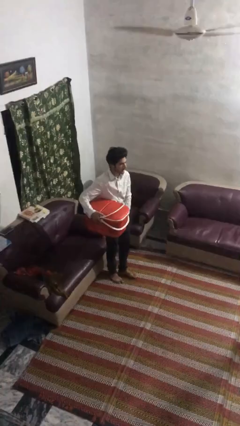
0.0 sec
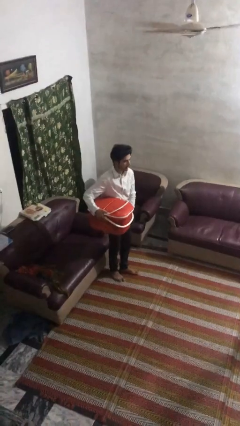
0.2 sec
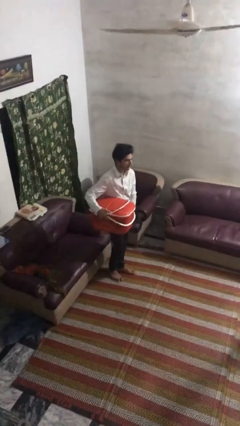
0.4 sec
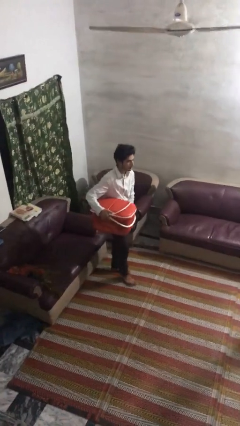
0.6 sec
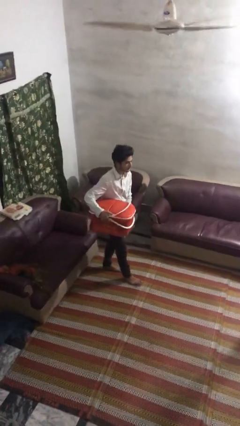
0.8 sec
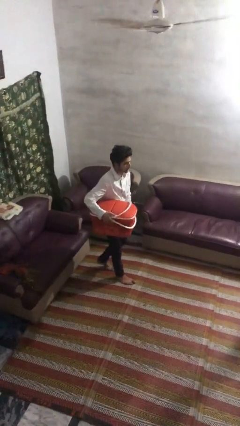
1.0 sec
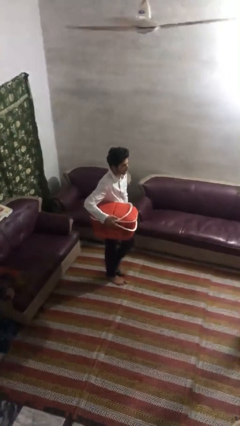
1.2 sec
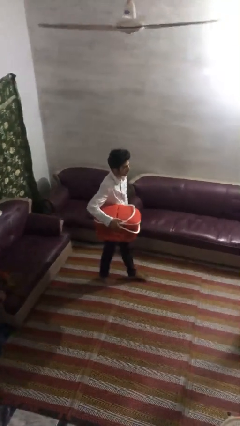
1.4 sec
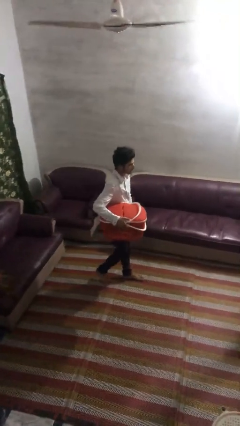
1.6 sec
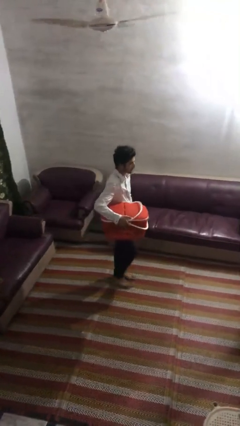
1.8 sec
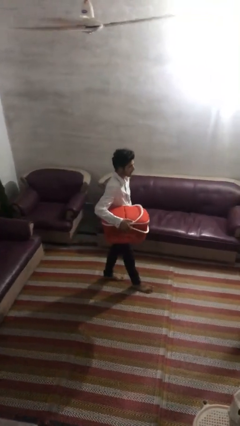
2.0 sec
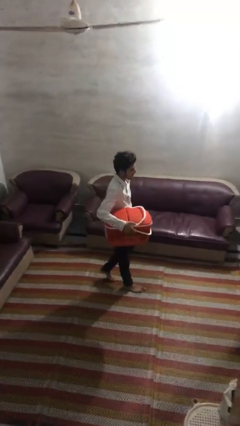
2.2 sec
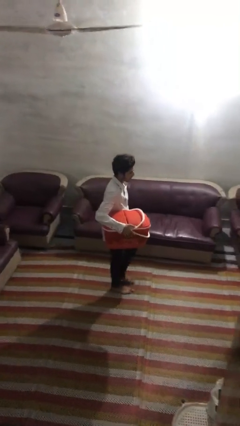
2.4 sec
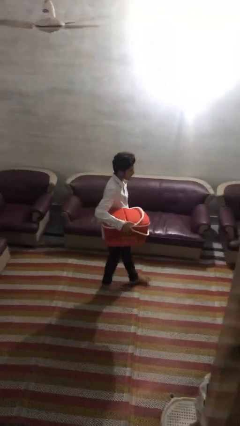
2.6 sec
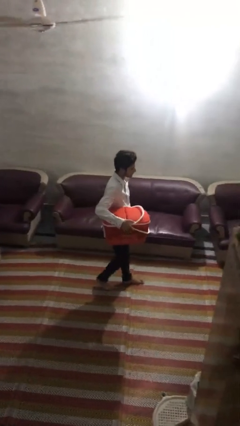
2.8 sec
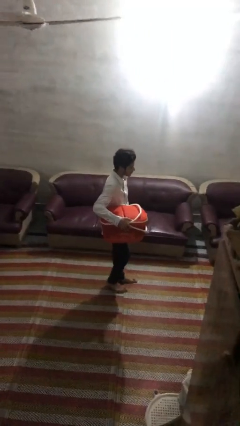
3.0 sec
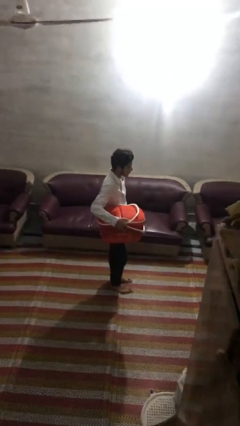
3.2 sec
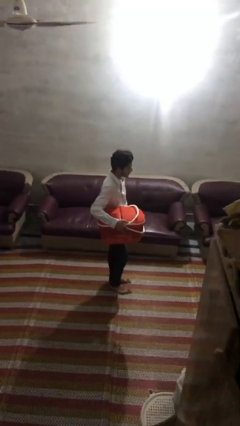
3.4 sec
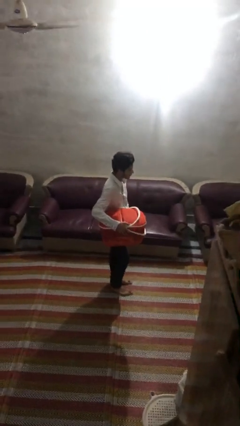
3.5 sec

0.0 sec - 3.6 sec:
person carries laundry basket

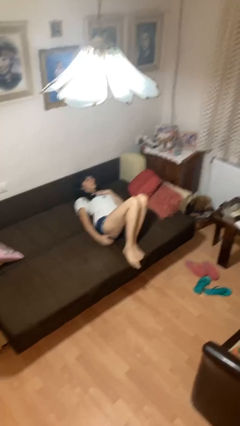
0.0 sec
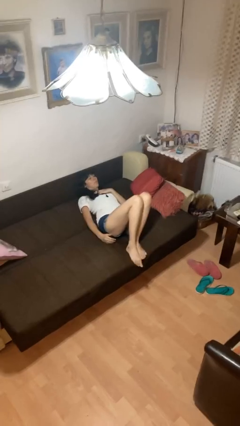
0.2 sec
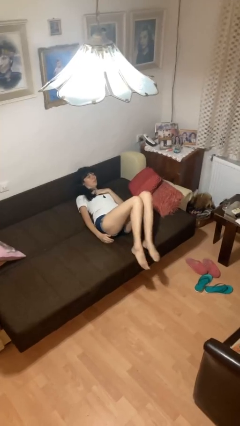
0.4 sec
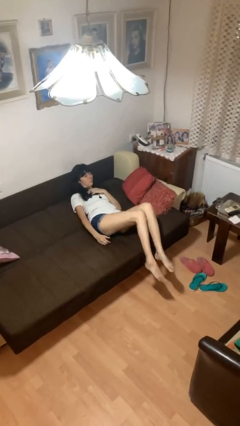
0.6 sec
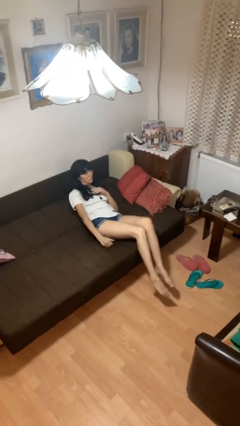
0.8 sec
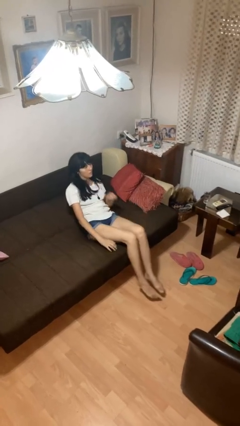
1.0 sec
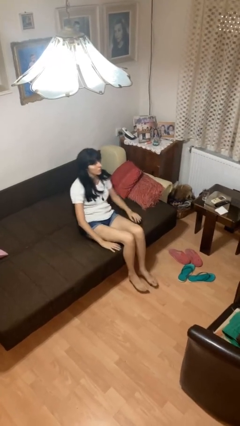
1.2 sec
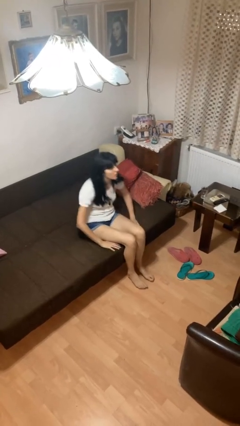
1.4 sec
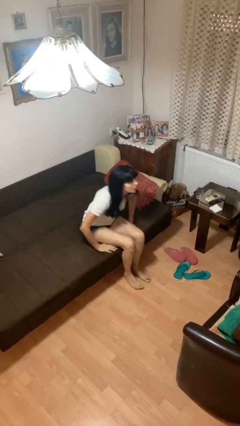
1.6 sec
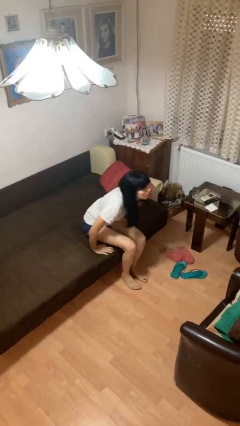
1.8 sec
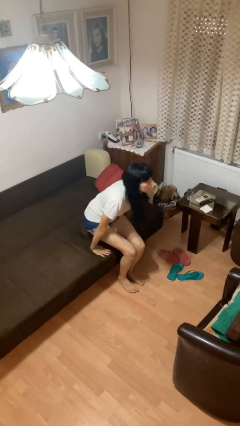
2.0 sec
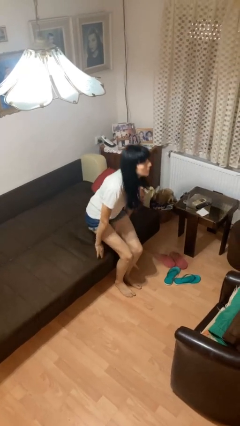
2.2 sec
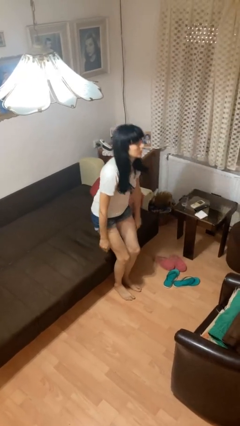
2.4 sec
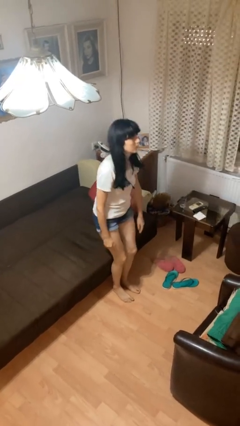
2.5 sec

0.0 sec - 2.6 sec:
person stands up

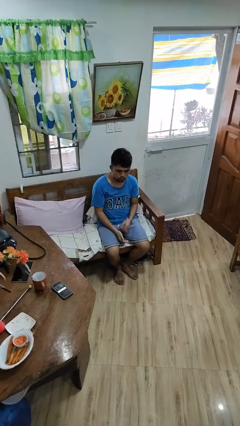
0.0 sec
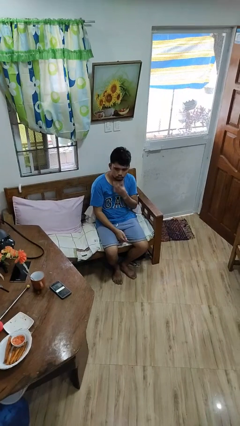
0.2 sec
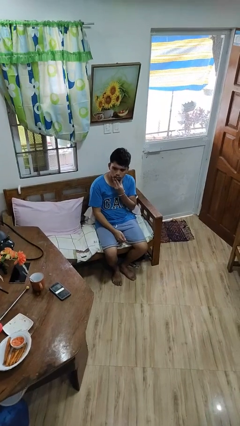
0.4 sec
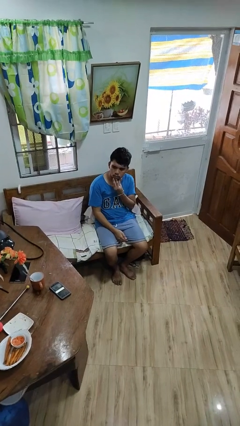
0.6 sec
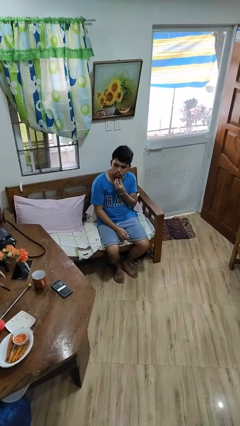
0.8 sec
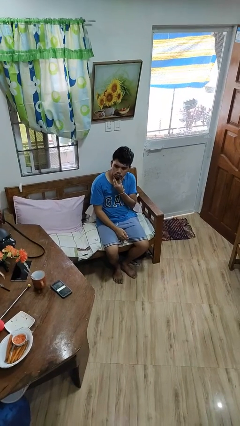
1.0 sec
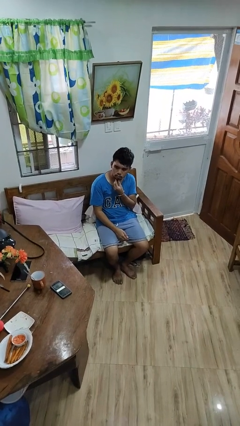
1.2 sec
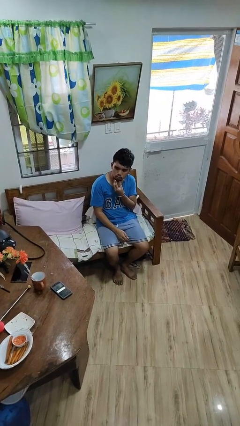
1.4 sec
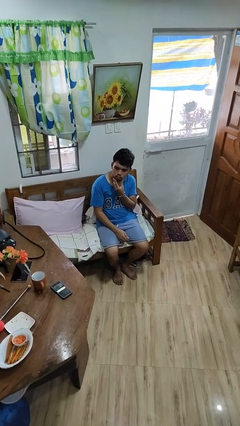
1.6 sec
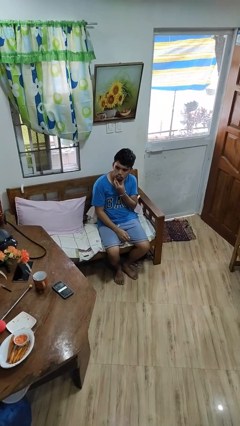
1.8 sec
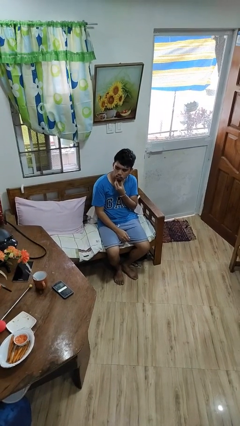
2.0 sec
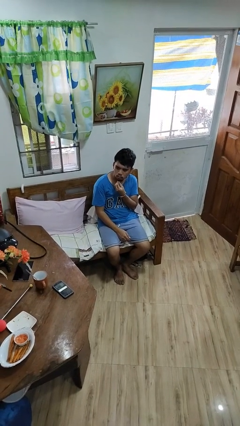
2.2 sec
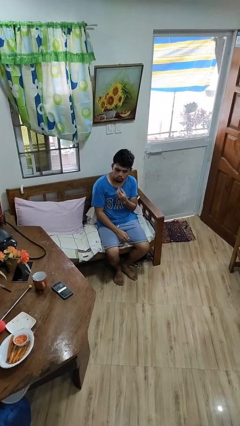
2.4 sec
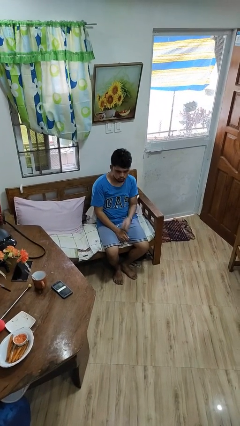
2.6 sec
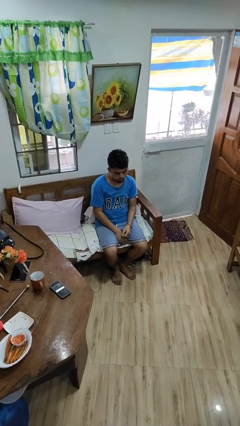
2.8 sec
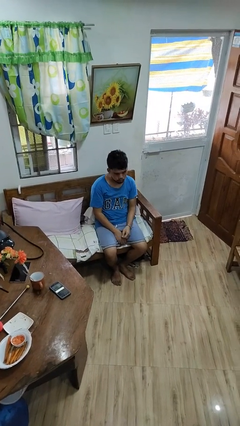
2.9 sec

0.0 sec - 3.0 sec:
person strokes chin

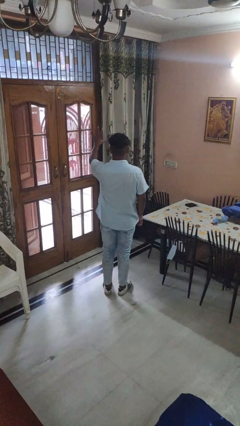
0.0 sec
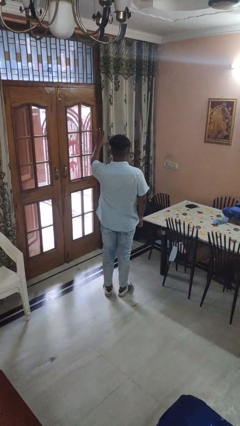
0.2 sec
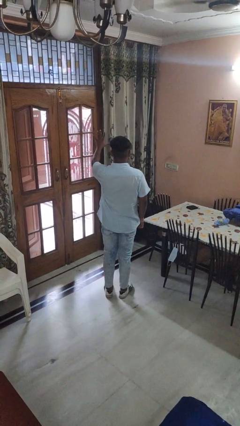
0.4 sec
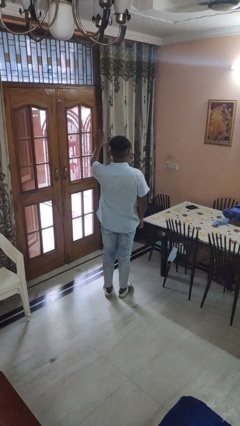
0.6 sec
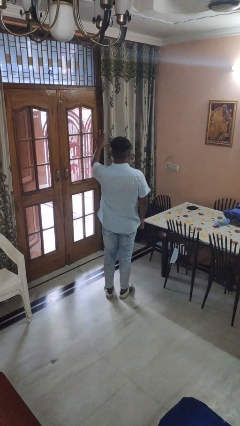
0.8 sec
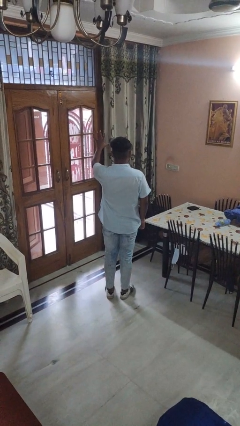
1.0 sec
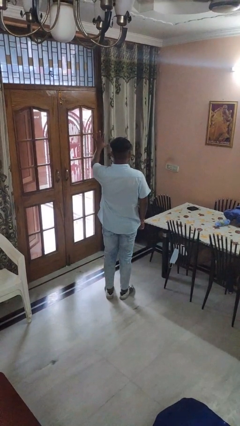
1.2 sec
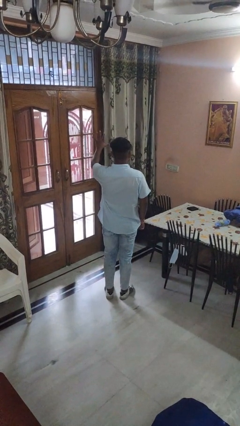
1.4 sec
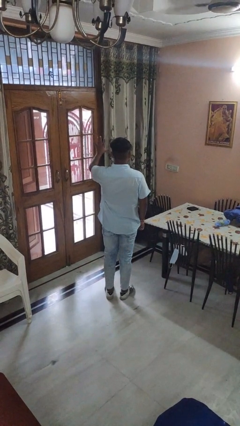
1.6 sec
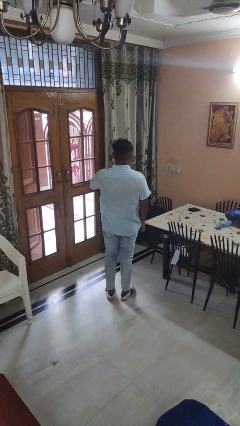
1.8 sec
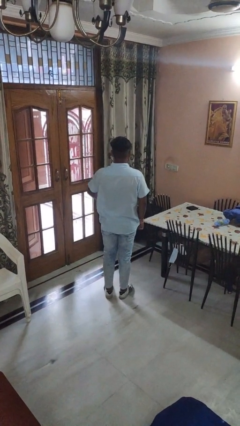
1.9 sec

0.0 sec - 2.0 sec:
person gestures number five

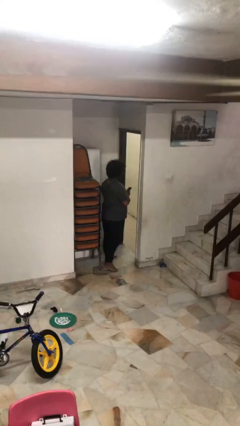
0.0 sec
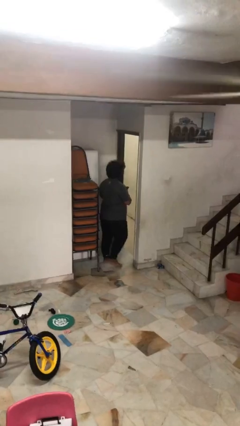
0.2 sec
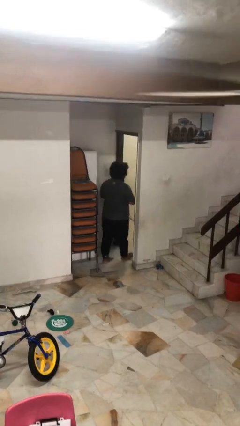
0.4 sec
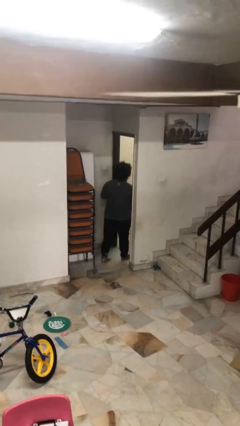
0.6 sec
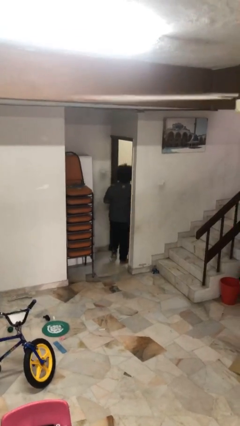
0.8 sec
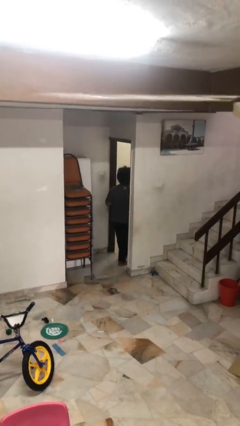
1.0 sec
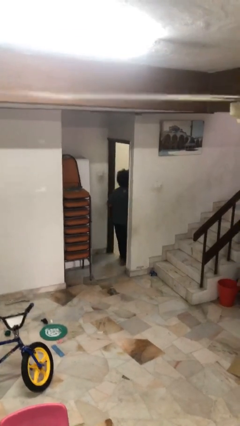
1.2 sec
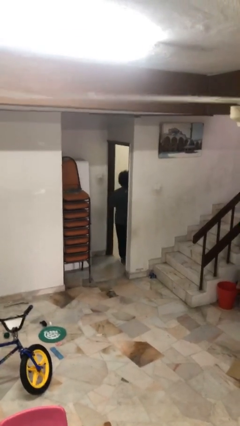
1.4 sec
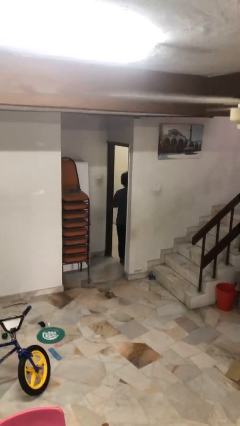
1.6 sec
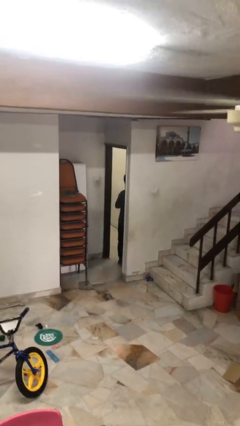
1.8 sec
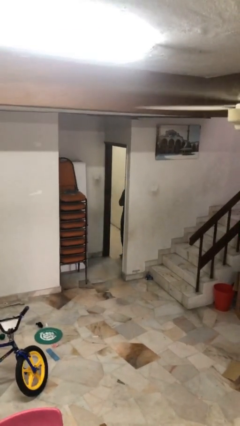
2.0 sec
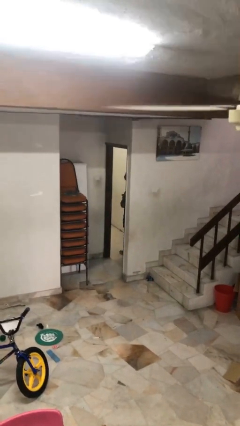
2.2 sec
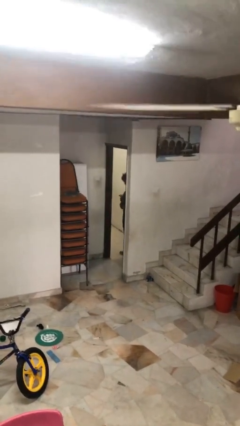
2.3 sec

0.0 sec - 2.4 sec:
person exits scene through structure

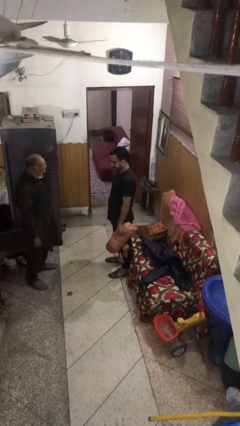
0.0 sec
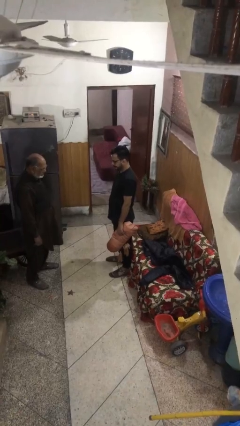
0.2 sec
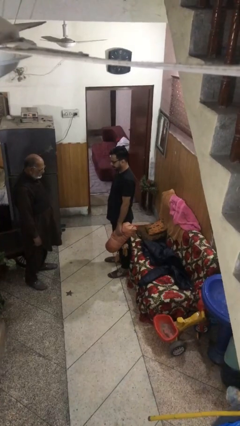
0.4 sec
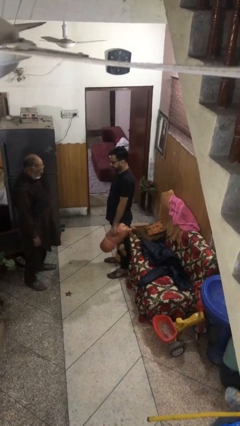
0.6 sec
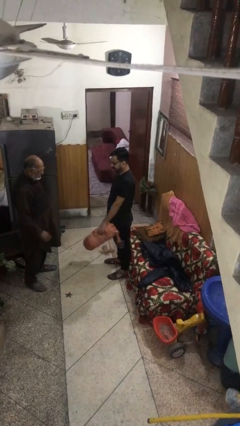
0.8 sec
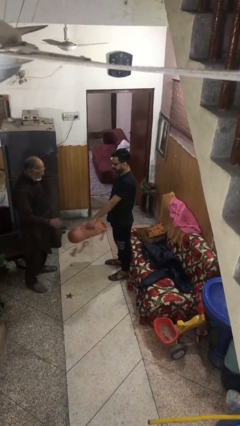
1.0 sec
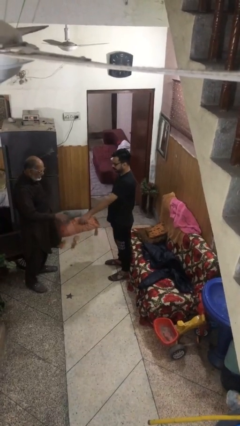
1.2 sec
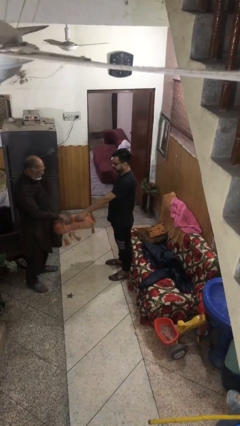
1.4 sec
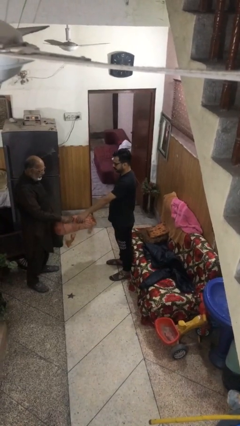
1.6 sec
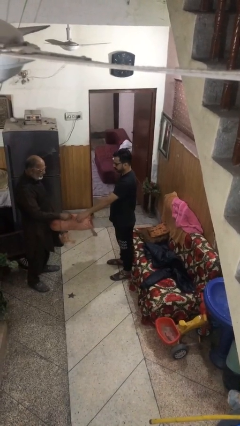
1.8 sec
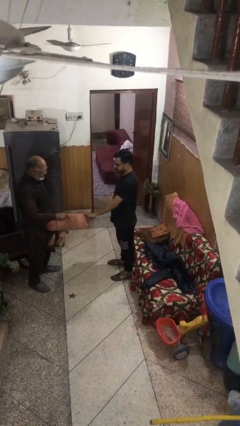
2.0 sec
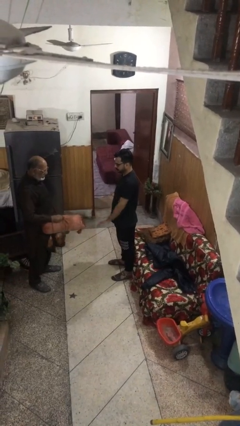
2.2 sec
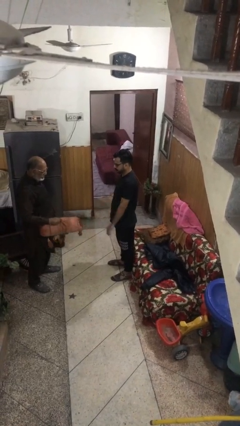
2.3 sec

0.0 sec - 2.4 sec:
person transfers object to person

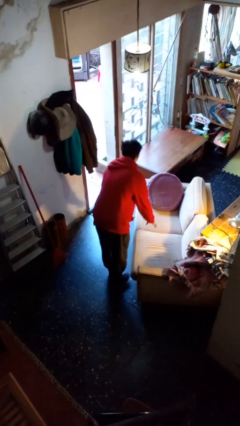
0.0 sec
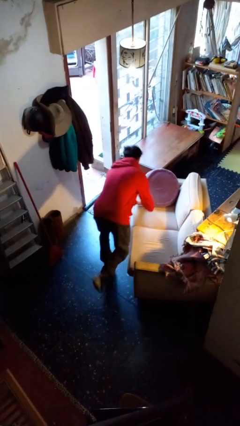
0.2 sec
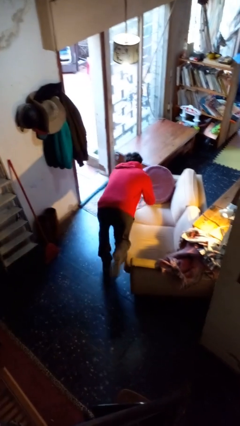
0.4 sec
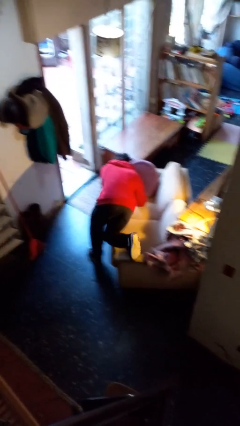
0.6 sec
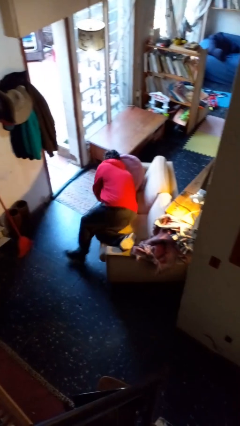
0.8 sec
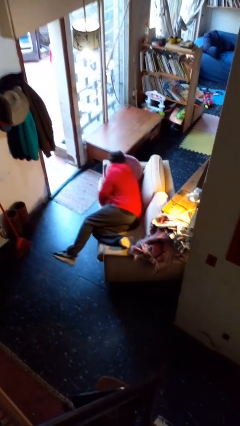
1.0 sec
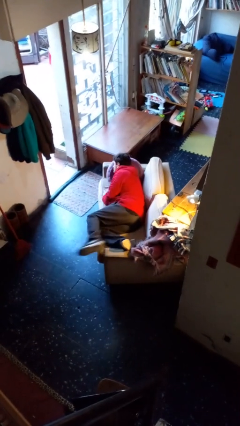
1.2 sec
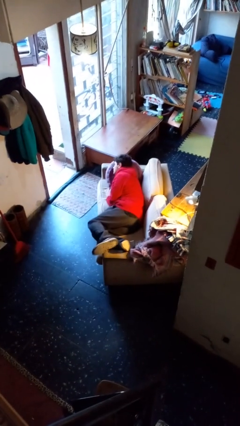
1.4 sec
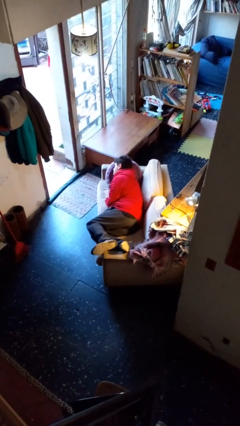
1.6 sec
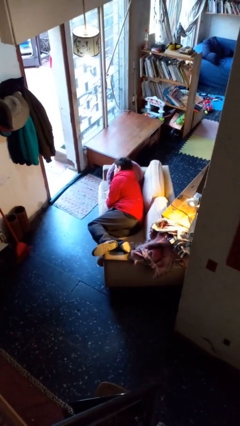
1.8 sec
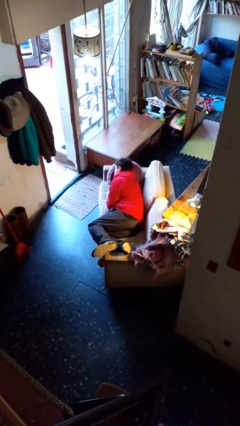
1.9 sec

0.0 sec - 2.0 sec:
person lies down on couch
